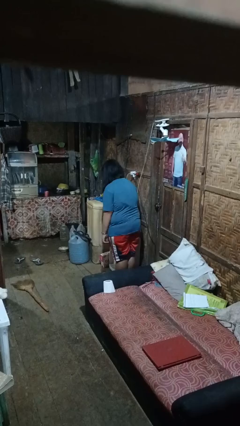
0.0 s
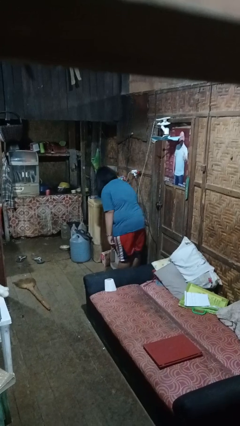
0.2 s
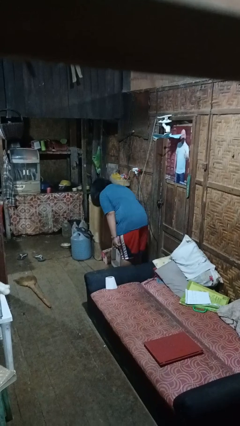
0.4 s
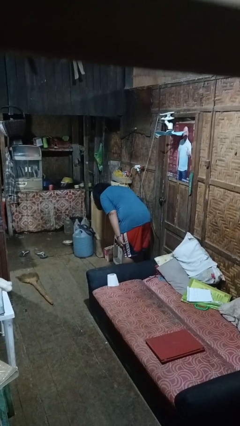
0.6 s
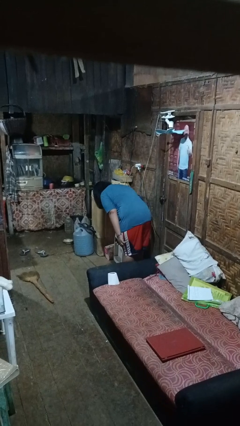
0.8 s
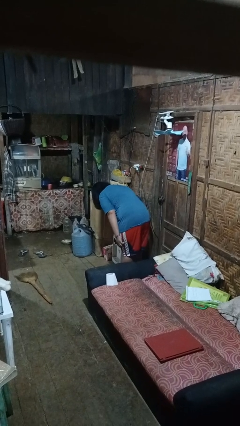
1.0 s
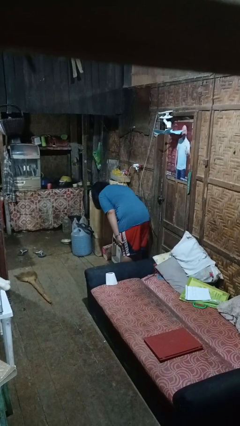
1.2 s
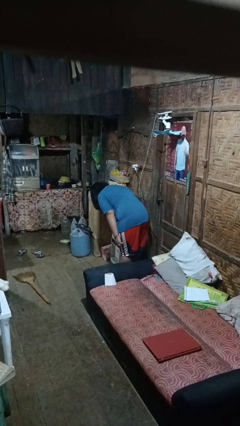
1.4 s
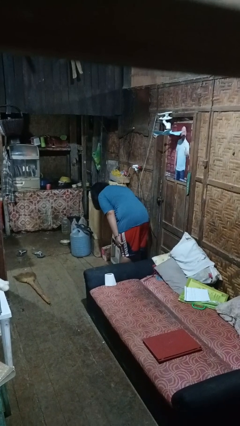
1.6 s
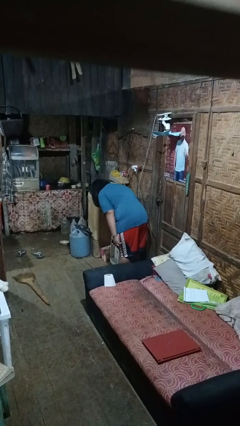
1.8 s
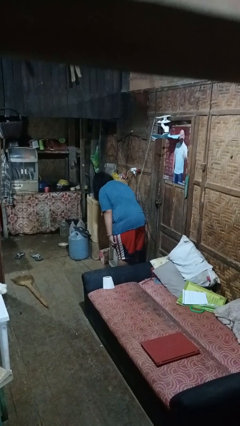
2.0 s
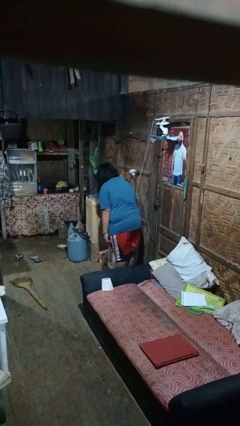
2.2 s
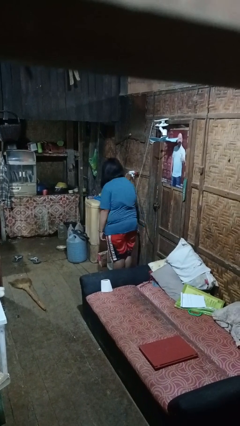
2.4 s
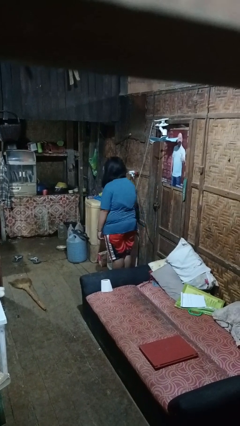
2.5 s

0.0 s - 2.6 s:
person bows

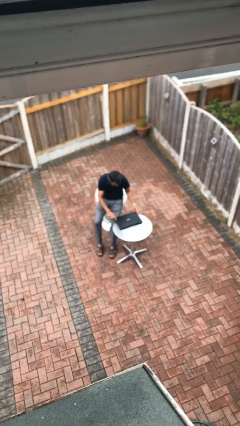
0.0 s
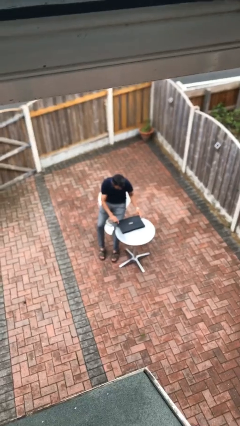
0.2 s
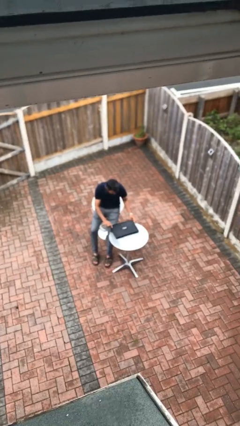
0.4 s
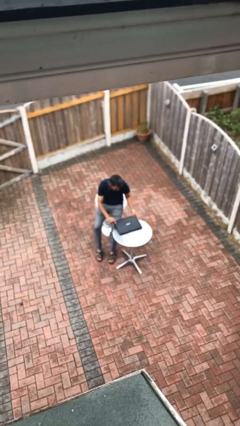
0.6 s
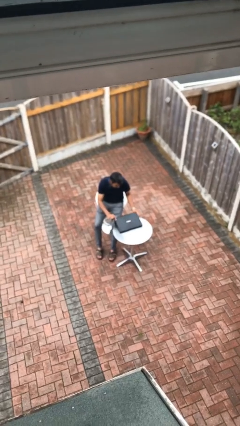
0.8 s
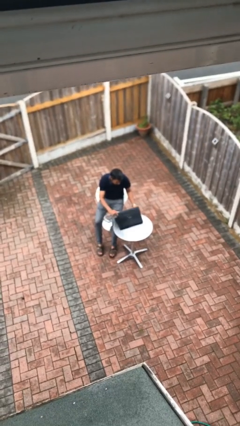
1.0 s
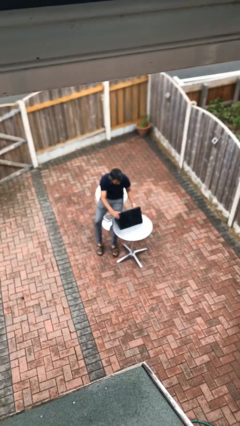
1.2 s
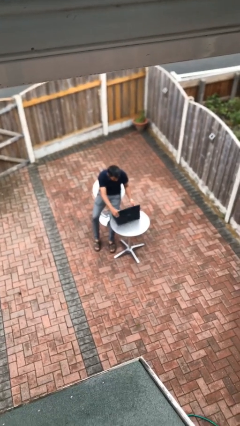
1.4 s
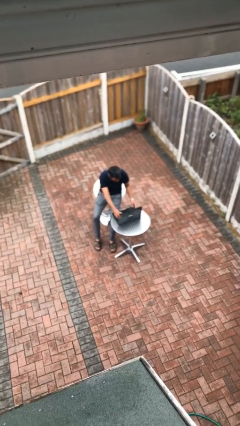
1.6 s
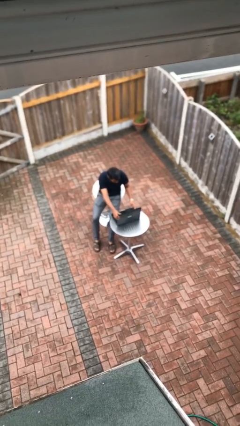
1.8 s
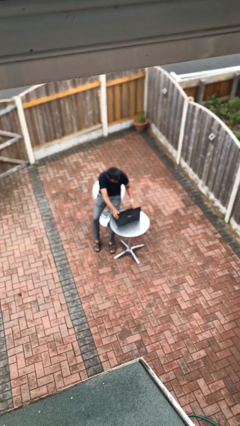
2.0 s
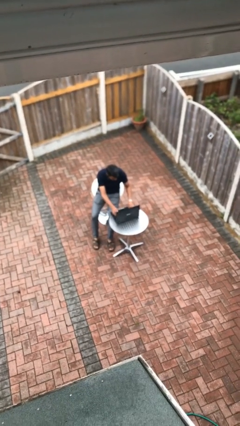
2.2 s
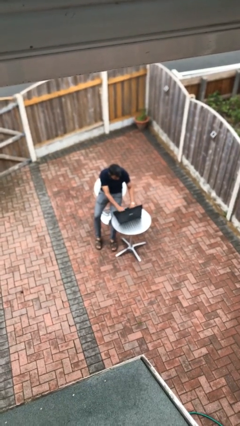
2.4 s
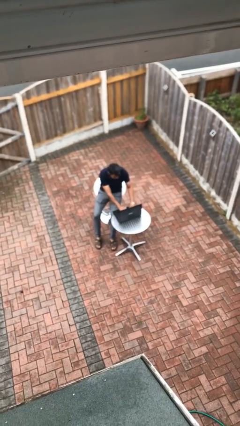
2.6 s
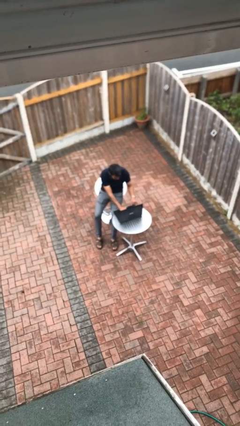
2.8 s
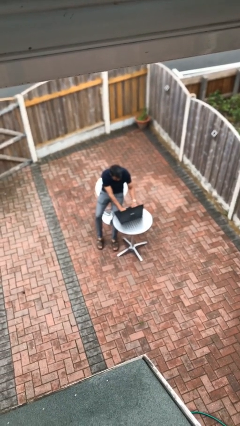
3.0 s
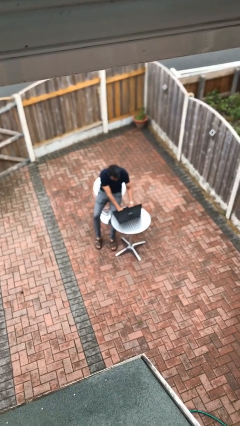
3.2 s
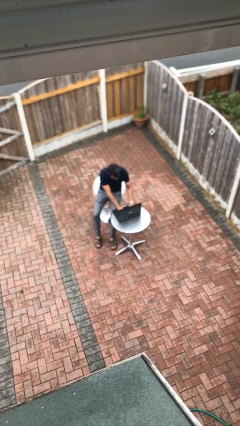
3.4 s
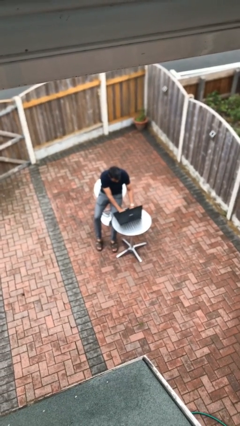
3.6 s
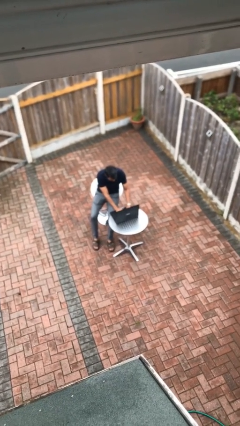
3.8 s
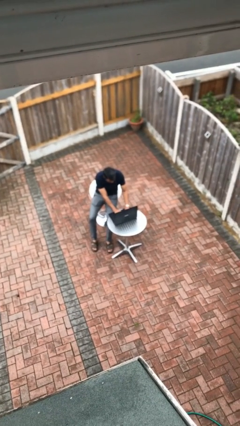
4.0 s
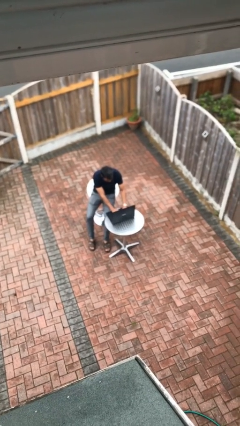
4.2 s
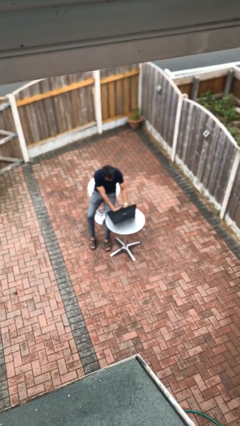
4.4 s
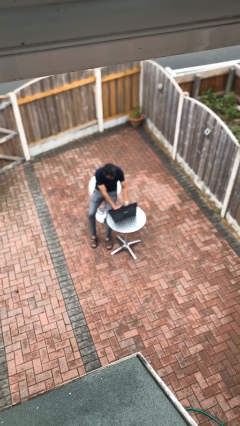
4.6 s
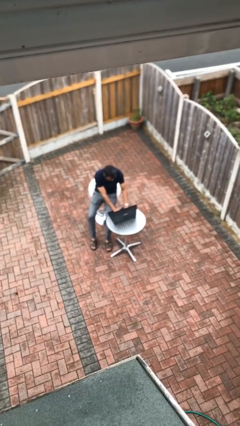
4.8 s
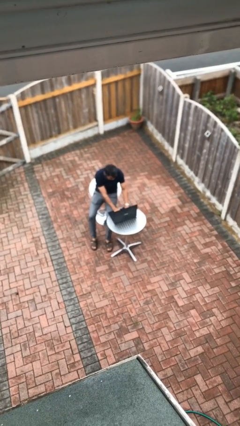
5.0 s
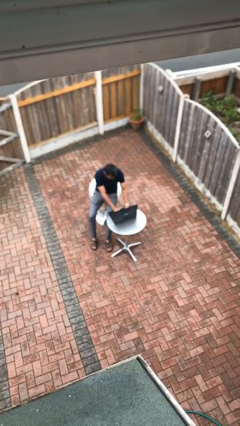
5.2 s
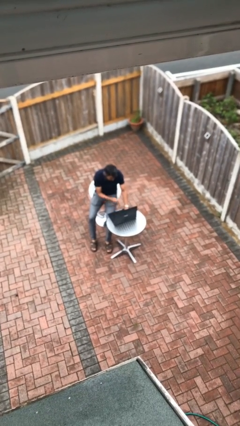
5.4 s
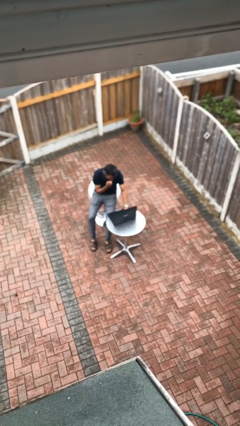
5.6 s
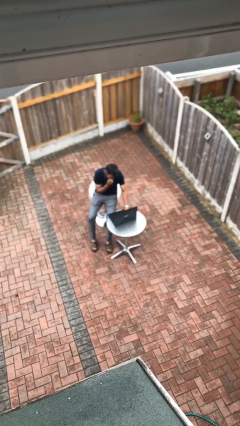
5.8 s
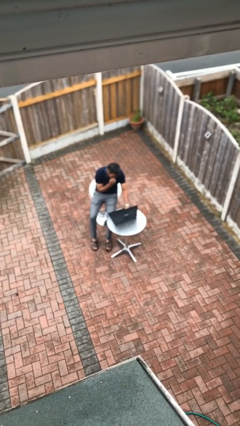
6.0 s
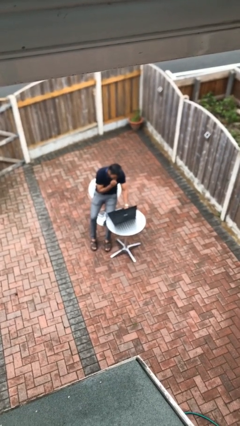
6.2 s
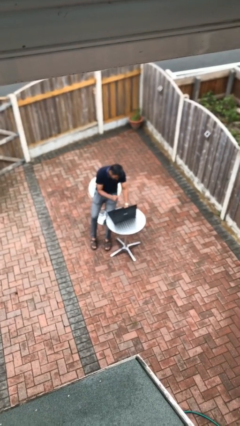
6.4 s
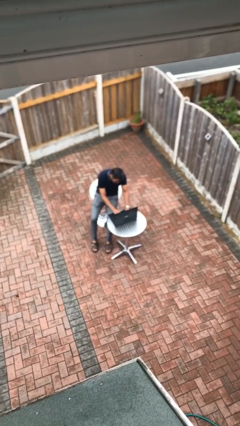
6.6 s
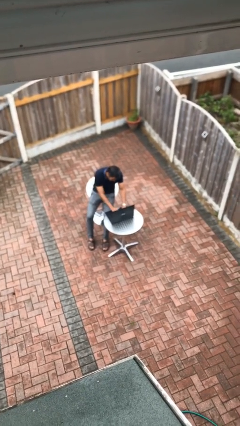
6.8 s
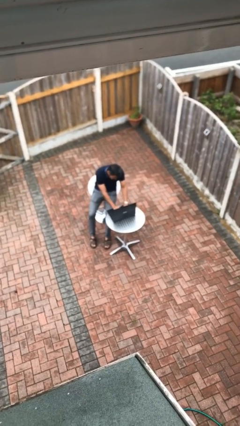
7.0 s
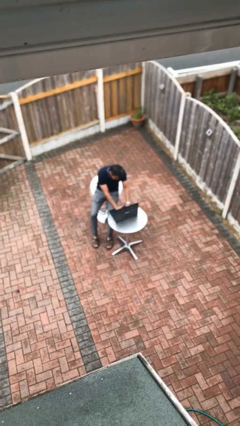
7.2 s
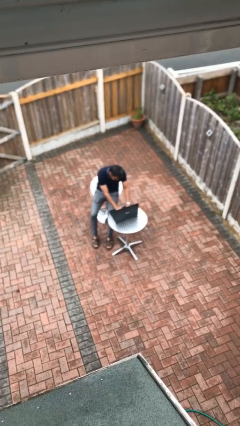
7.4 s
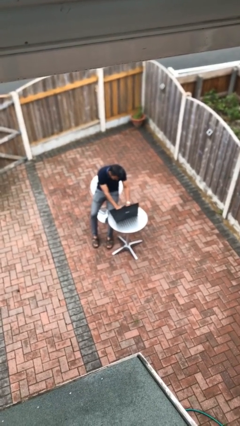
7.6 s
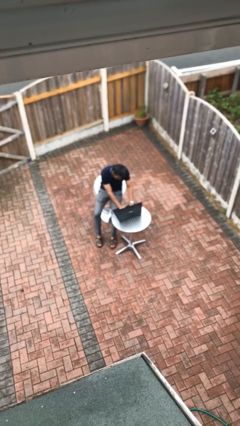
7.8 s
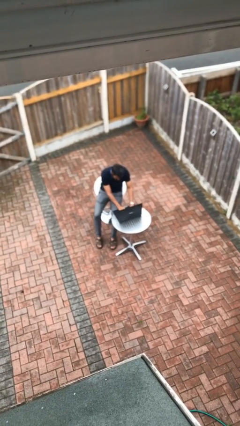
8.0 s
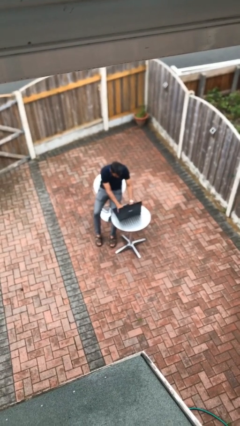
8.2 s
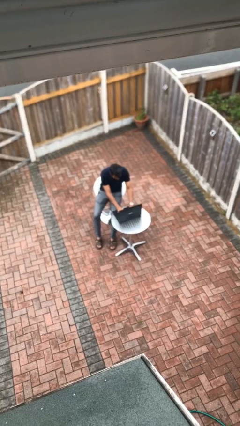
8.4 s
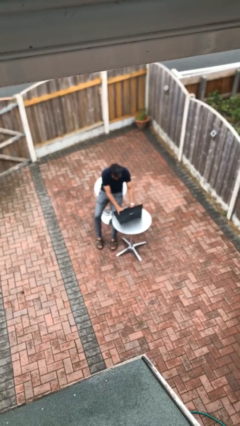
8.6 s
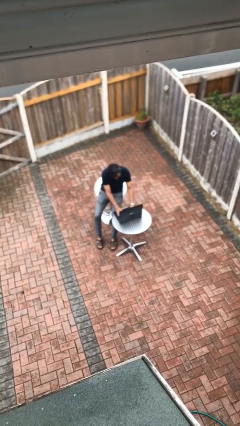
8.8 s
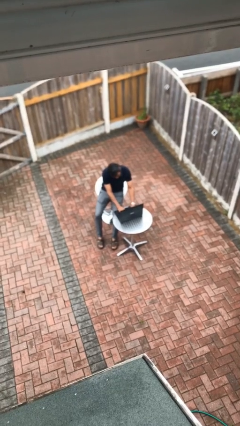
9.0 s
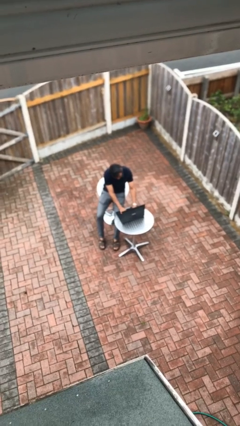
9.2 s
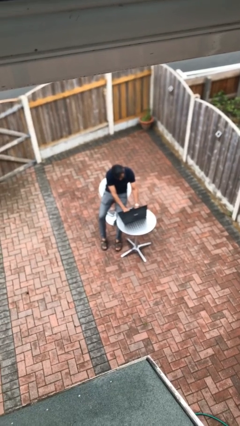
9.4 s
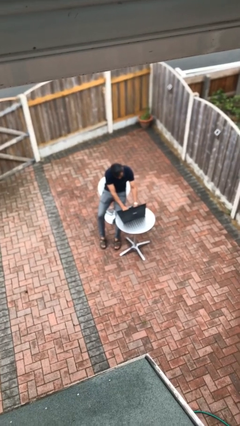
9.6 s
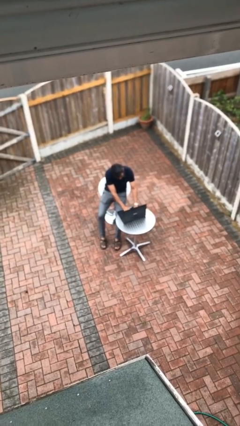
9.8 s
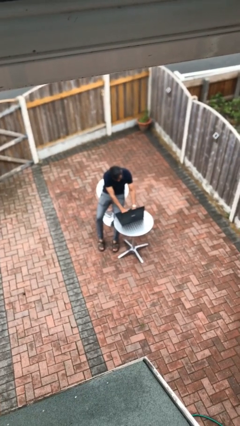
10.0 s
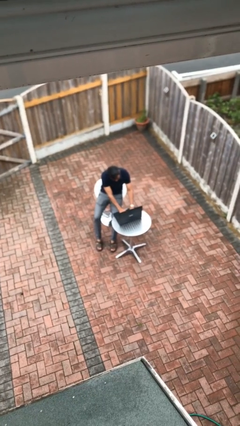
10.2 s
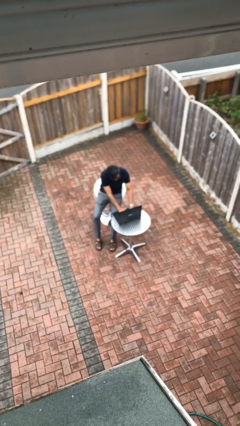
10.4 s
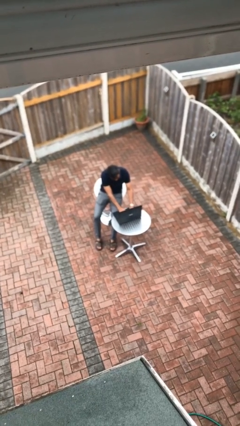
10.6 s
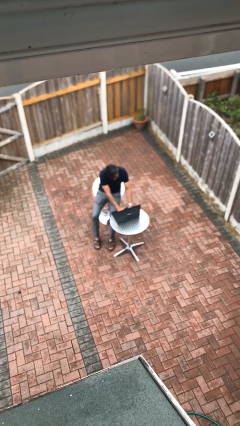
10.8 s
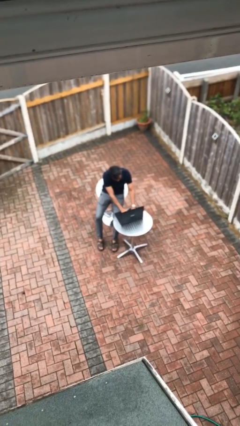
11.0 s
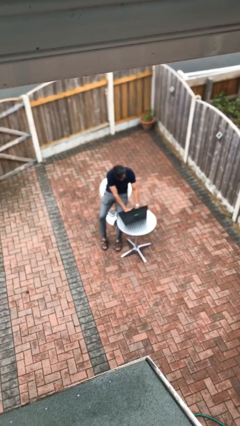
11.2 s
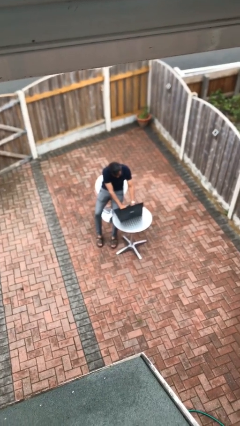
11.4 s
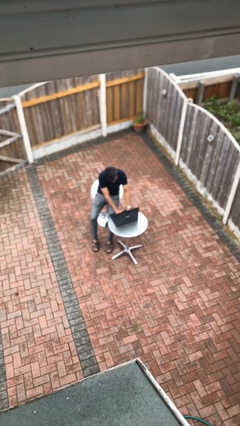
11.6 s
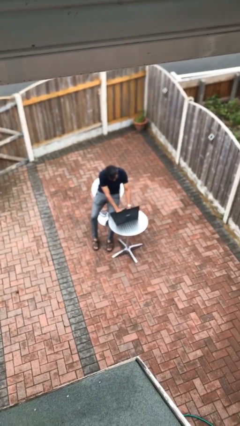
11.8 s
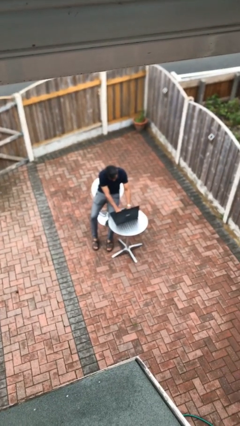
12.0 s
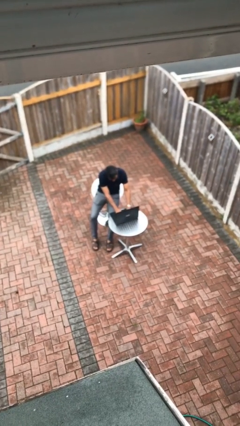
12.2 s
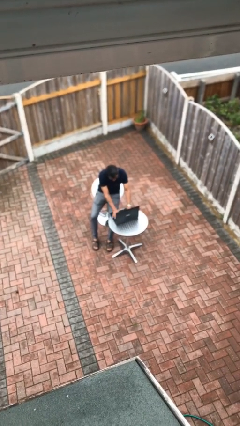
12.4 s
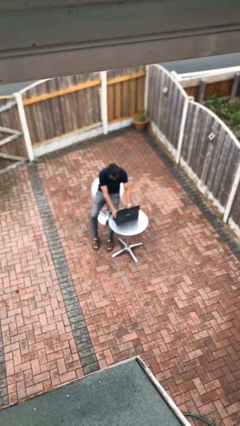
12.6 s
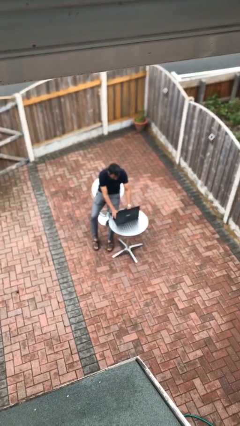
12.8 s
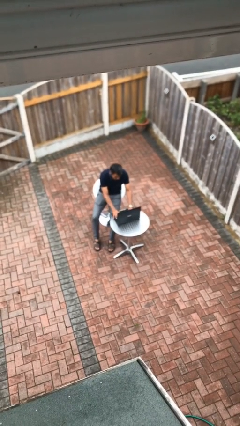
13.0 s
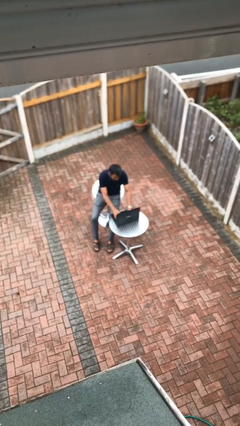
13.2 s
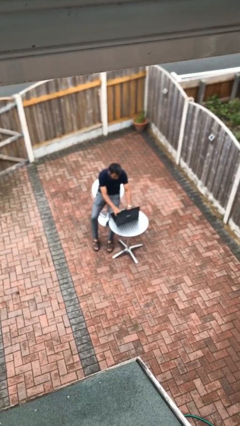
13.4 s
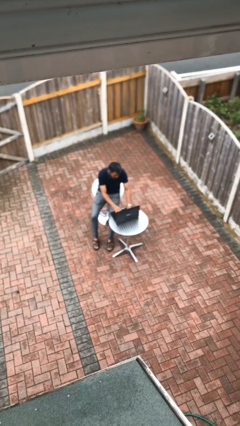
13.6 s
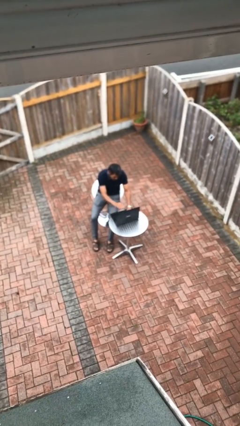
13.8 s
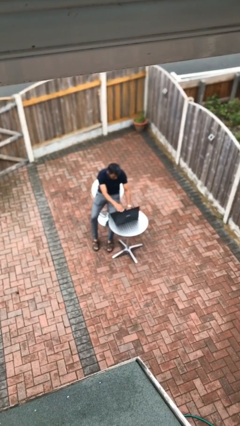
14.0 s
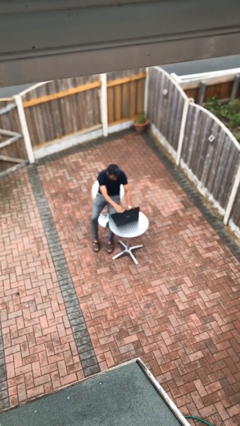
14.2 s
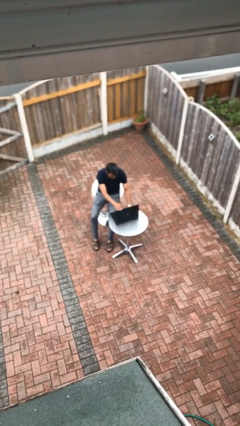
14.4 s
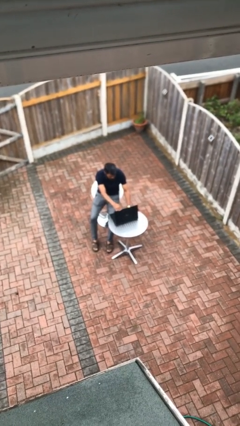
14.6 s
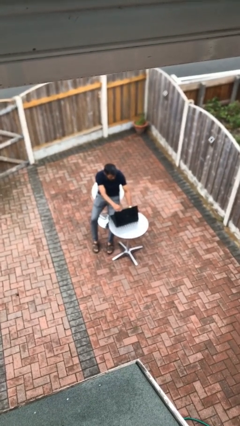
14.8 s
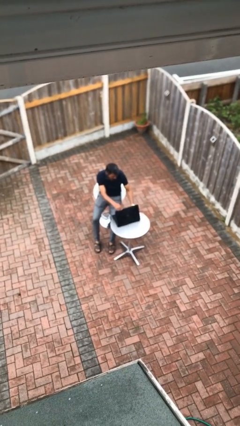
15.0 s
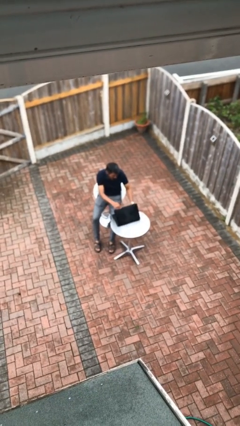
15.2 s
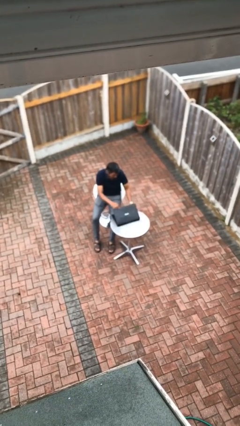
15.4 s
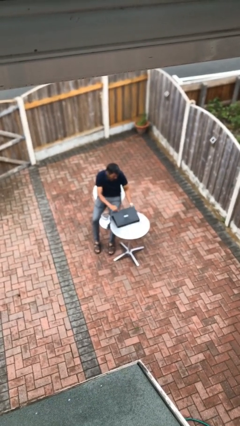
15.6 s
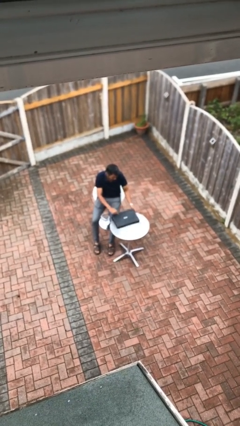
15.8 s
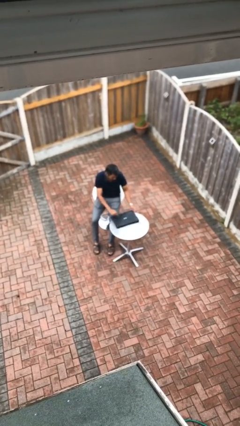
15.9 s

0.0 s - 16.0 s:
person interacts with laptop
